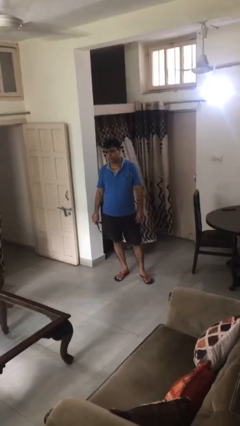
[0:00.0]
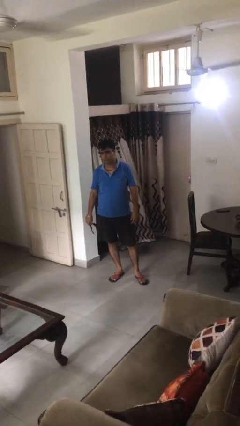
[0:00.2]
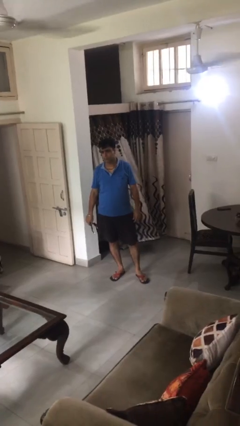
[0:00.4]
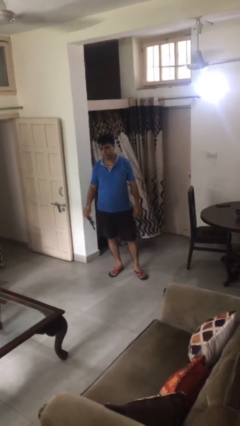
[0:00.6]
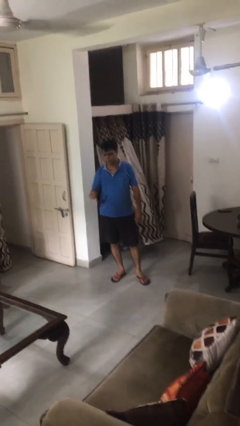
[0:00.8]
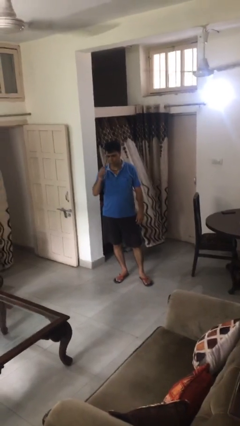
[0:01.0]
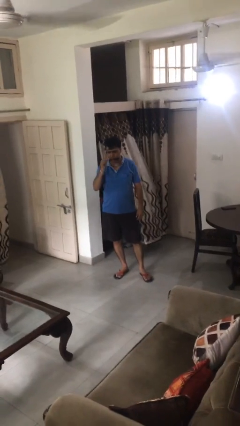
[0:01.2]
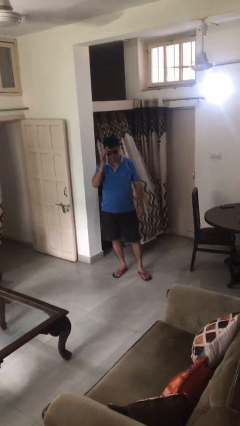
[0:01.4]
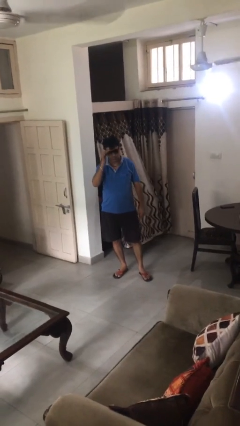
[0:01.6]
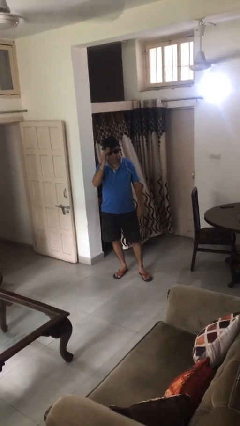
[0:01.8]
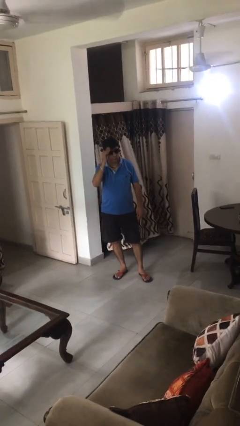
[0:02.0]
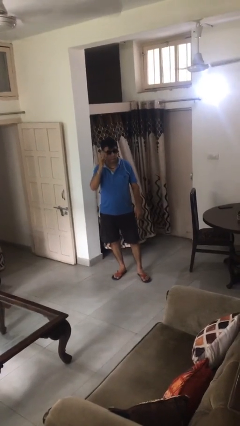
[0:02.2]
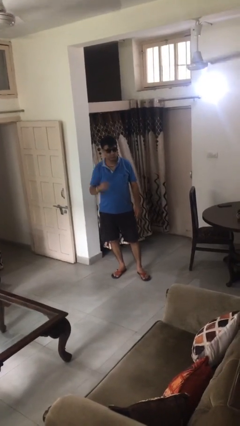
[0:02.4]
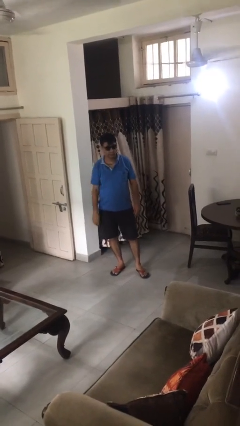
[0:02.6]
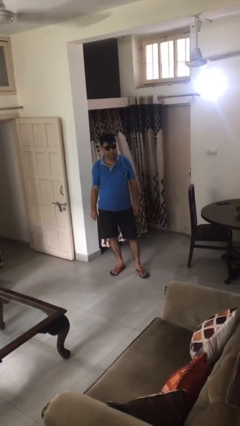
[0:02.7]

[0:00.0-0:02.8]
person puts on sunglasses

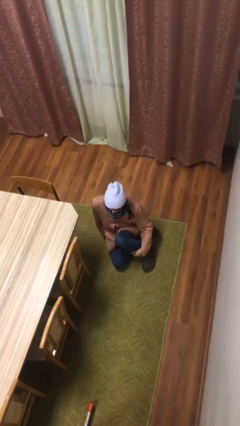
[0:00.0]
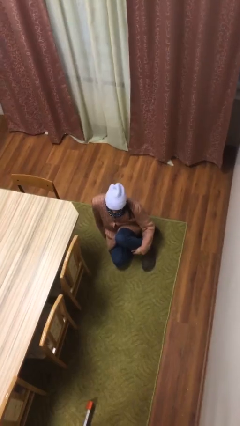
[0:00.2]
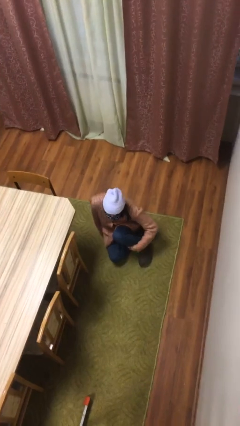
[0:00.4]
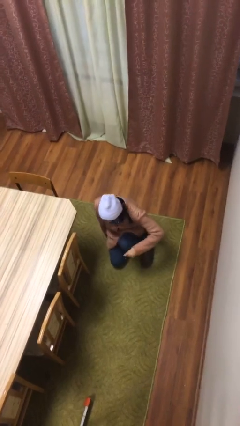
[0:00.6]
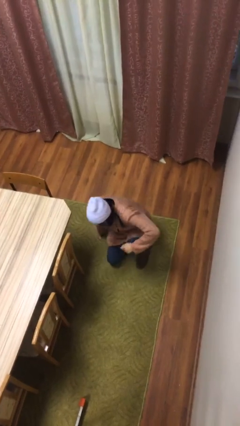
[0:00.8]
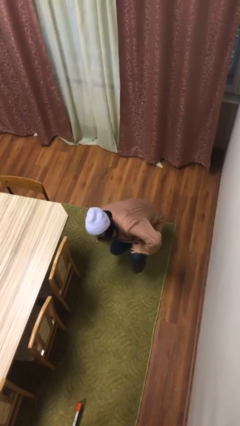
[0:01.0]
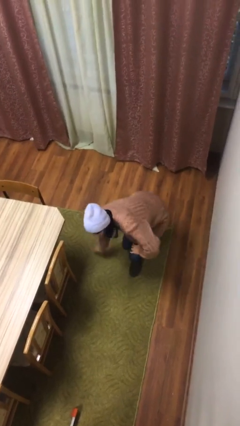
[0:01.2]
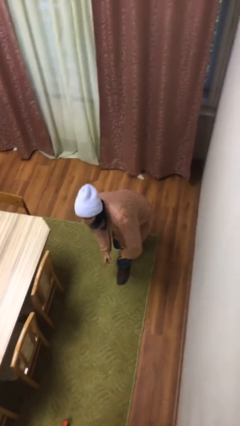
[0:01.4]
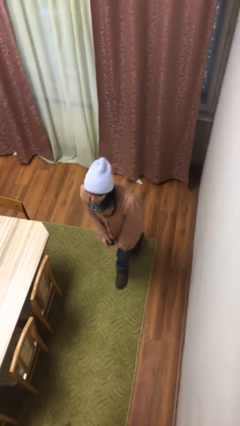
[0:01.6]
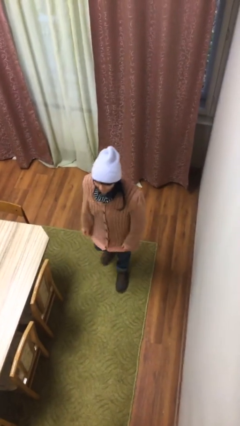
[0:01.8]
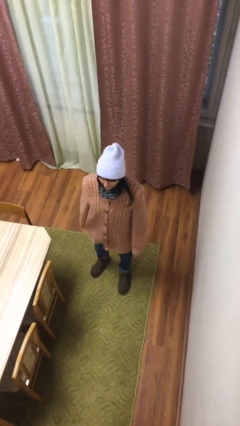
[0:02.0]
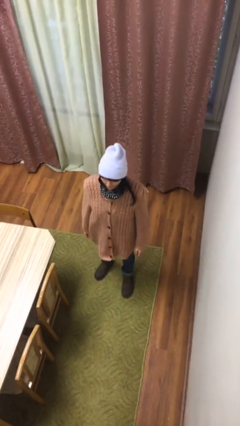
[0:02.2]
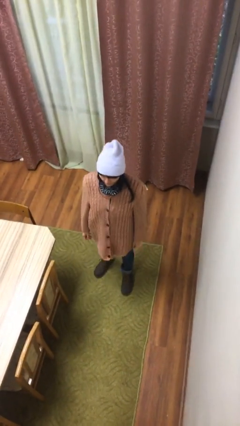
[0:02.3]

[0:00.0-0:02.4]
person stands up

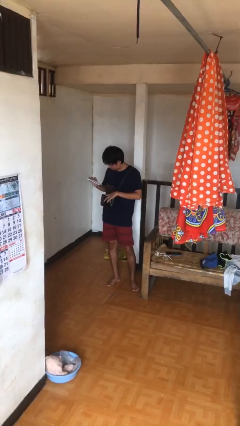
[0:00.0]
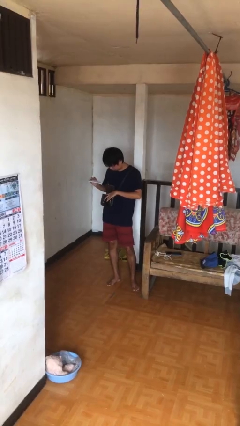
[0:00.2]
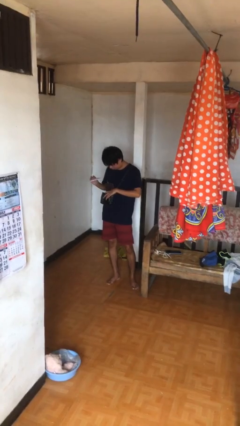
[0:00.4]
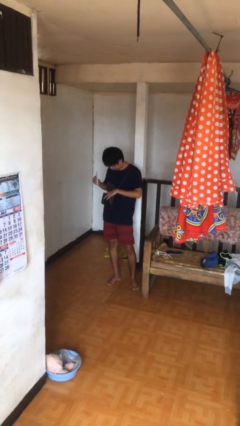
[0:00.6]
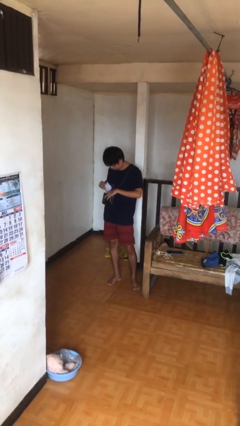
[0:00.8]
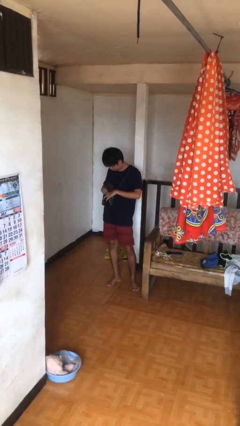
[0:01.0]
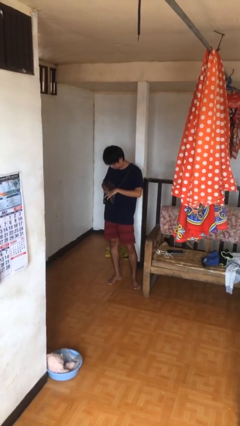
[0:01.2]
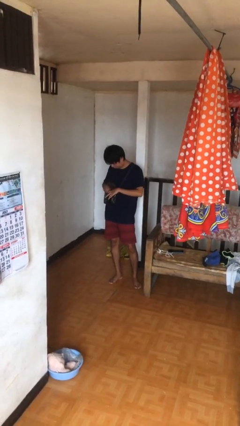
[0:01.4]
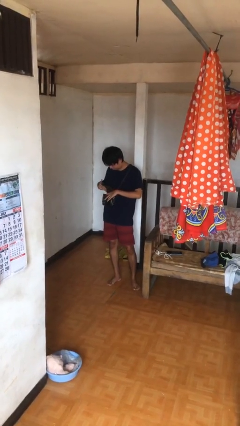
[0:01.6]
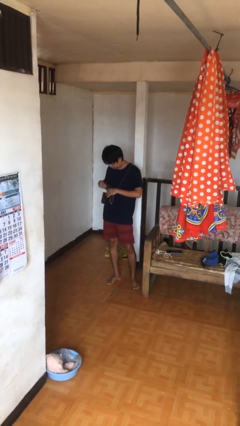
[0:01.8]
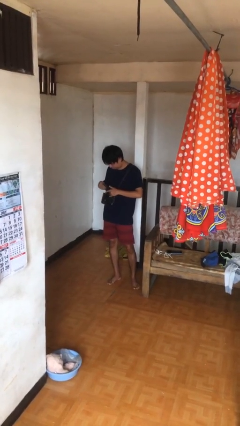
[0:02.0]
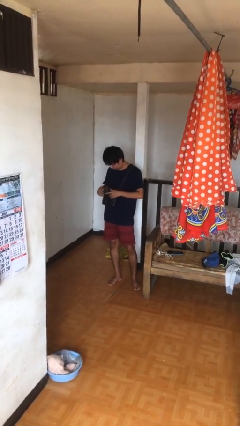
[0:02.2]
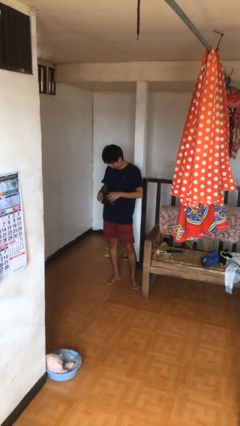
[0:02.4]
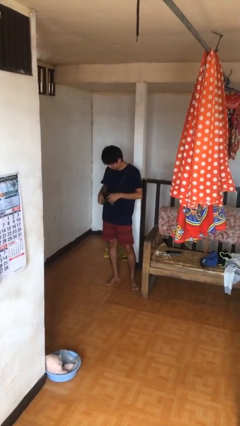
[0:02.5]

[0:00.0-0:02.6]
person puts object into purse

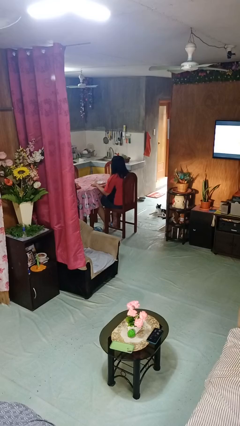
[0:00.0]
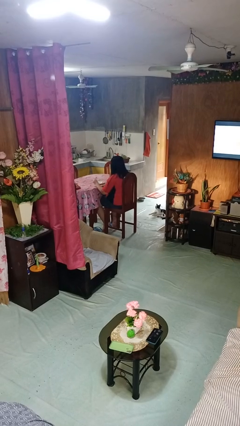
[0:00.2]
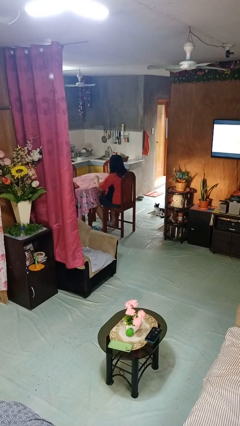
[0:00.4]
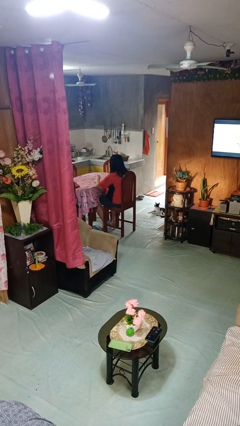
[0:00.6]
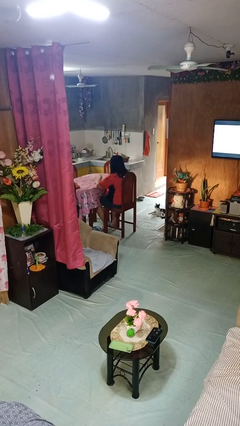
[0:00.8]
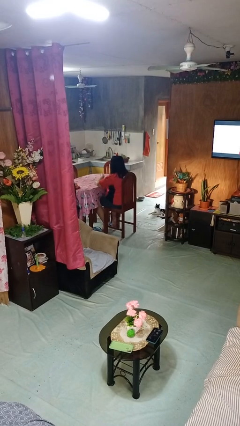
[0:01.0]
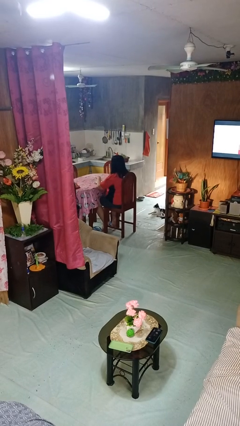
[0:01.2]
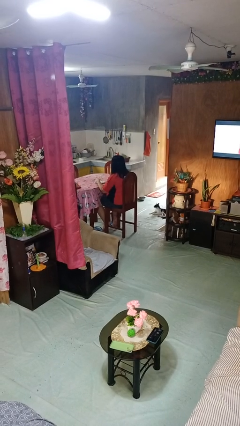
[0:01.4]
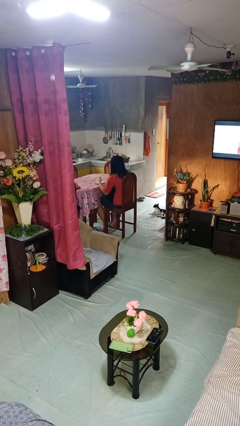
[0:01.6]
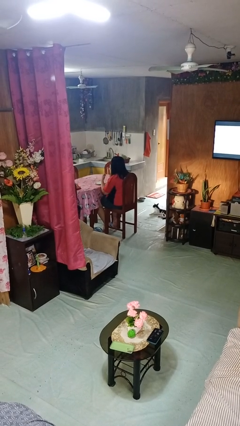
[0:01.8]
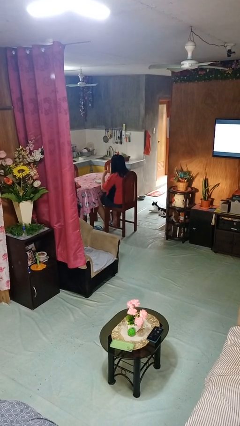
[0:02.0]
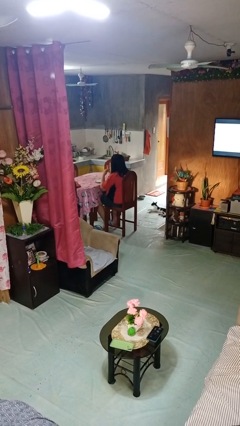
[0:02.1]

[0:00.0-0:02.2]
person eats with utensil

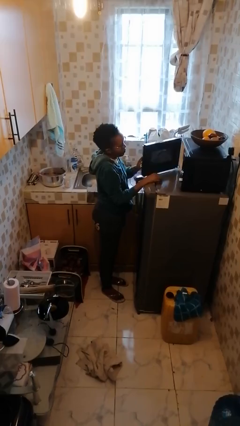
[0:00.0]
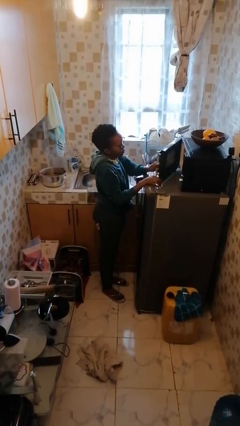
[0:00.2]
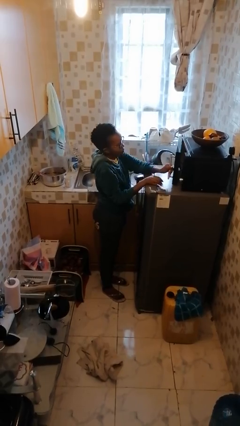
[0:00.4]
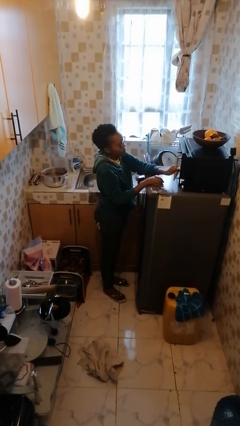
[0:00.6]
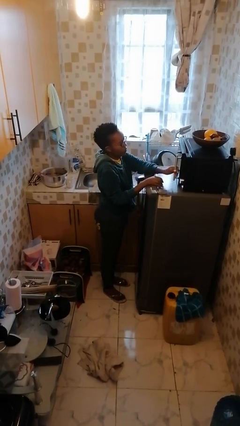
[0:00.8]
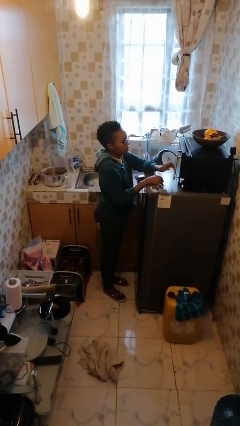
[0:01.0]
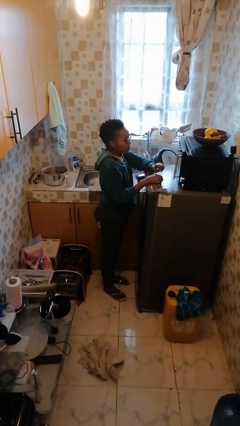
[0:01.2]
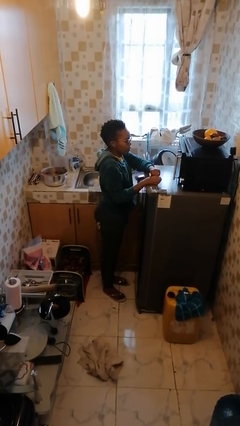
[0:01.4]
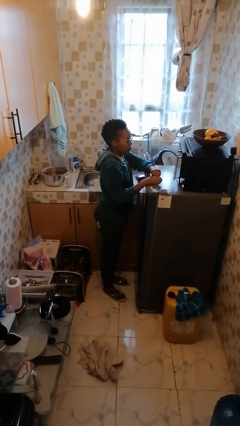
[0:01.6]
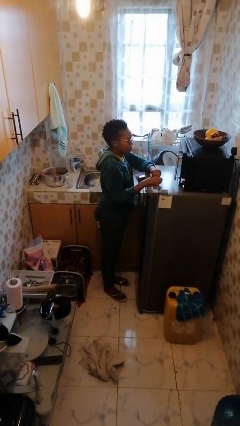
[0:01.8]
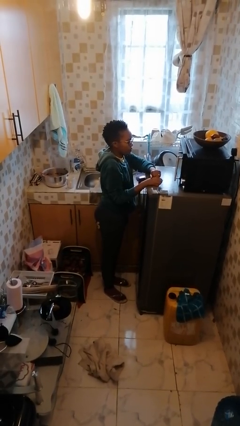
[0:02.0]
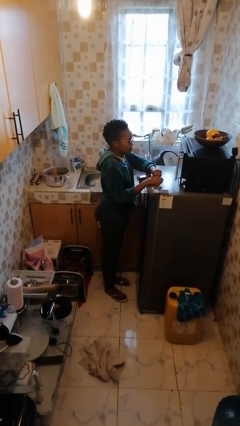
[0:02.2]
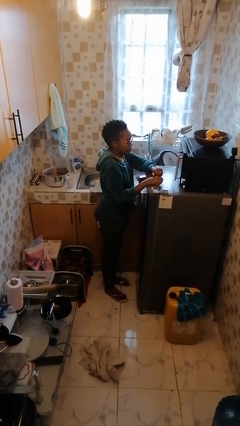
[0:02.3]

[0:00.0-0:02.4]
person closes microwave

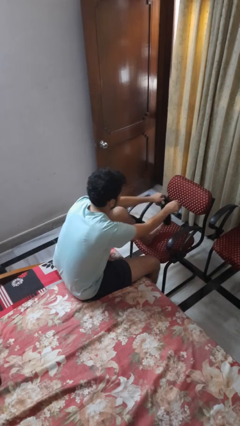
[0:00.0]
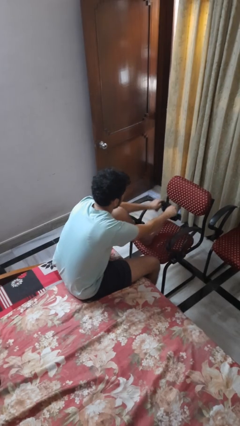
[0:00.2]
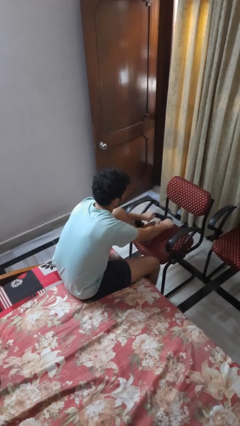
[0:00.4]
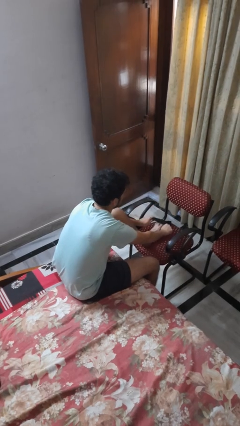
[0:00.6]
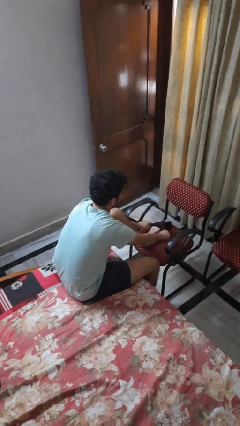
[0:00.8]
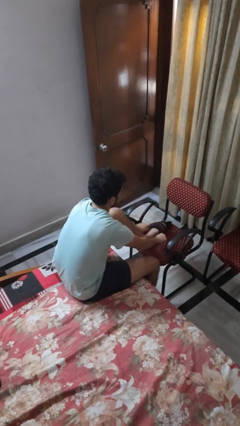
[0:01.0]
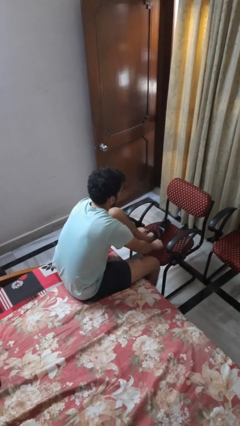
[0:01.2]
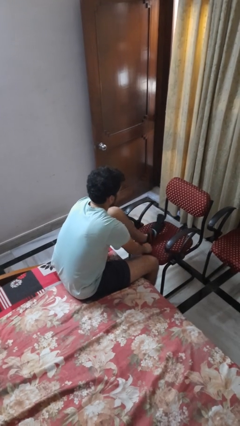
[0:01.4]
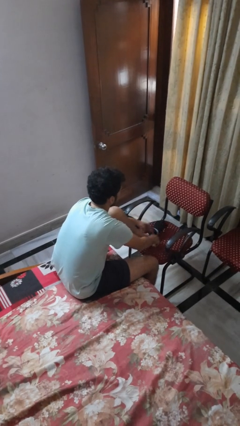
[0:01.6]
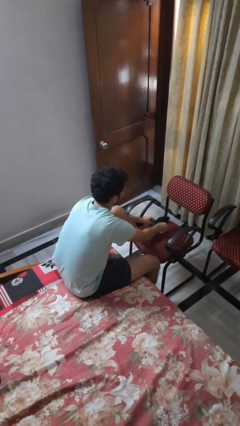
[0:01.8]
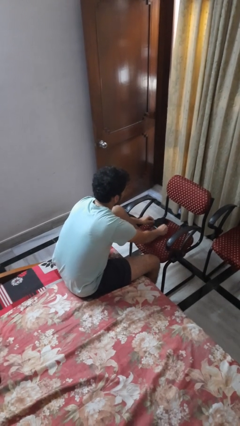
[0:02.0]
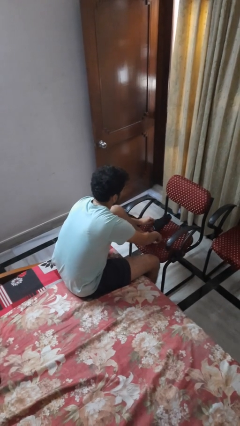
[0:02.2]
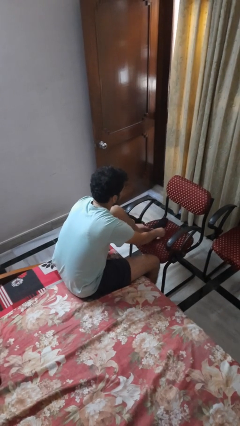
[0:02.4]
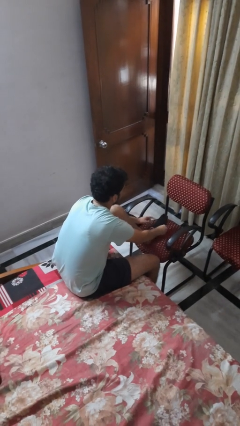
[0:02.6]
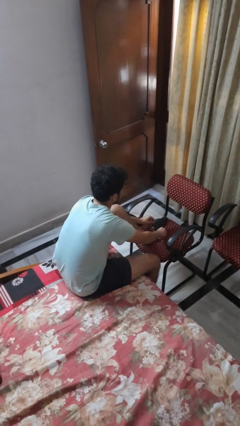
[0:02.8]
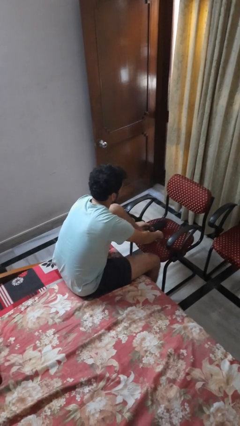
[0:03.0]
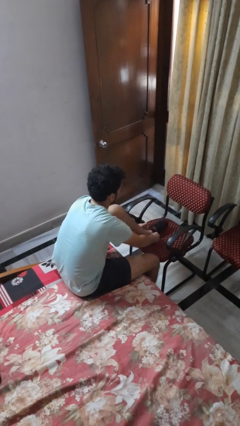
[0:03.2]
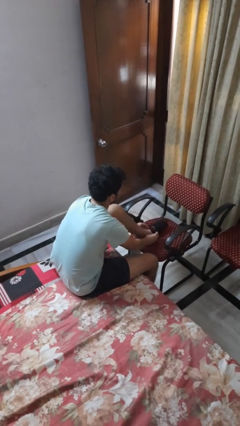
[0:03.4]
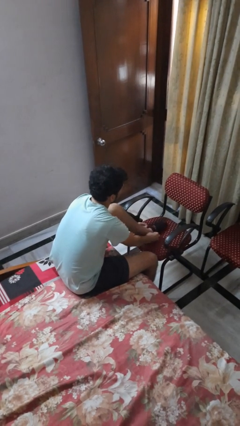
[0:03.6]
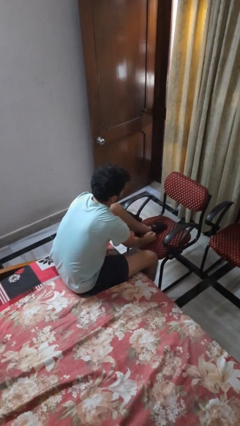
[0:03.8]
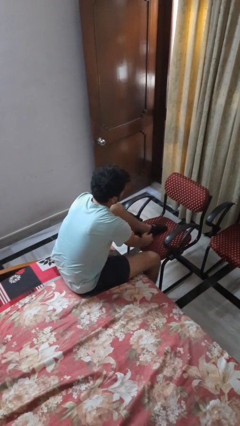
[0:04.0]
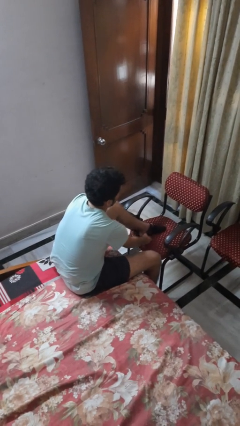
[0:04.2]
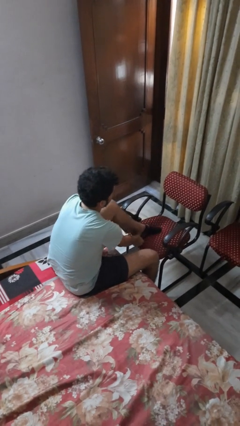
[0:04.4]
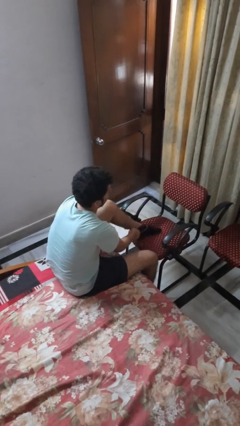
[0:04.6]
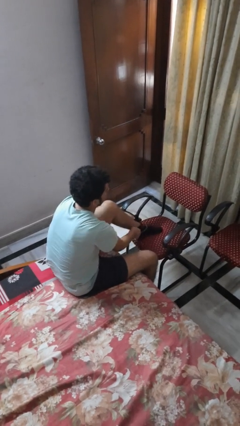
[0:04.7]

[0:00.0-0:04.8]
person puts on socks

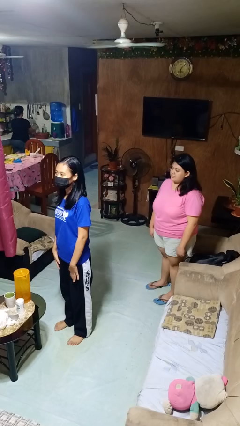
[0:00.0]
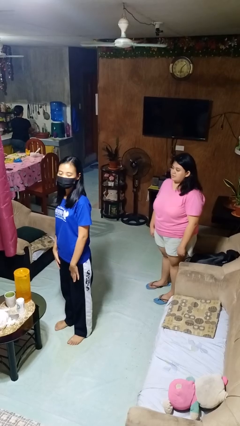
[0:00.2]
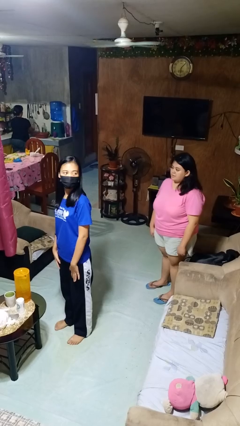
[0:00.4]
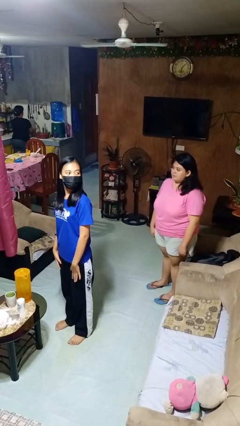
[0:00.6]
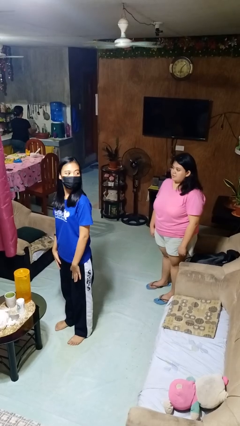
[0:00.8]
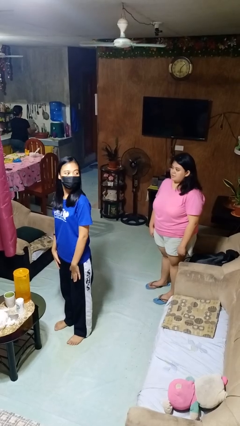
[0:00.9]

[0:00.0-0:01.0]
person looks over shoulder
